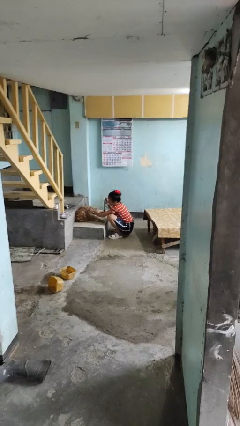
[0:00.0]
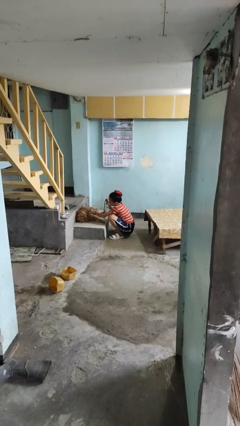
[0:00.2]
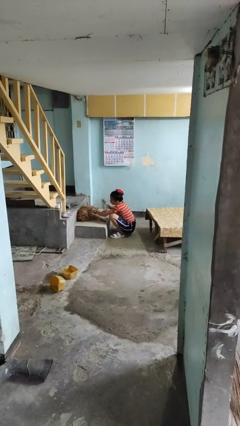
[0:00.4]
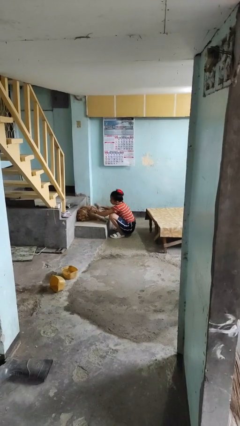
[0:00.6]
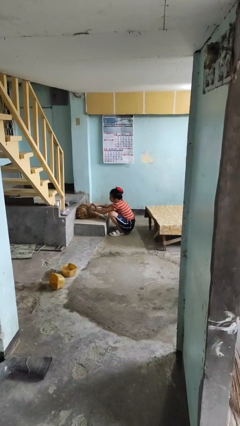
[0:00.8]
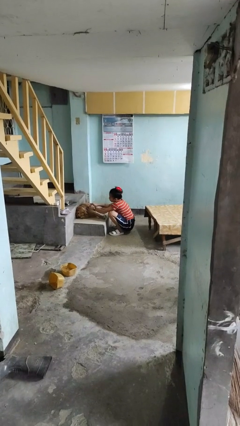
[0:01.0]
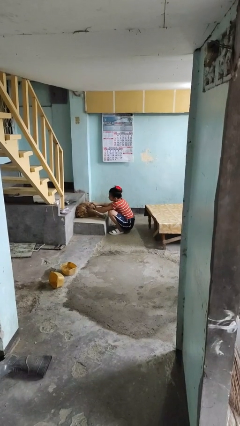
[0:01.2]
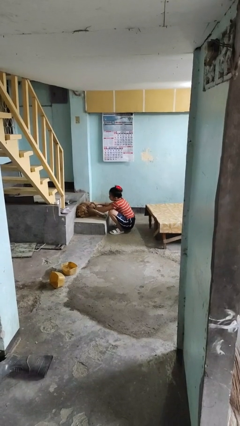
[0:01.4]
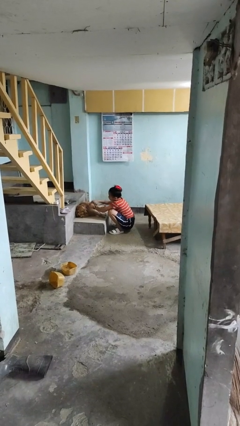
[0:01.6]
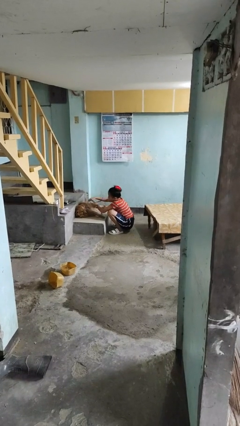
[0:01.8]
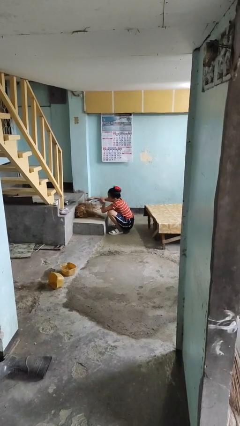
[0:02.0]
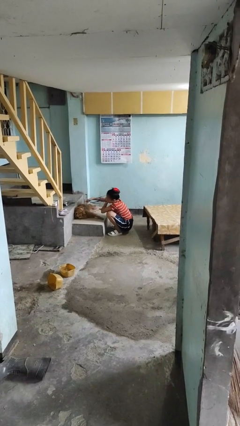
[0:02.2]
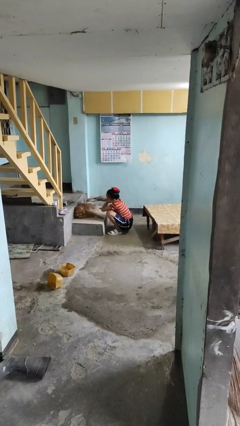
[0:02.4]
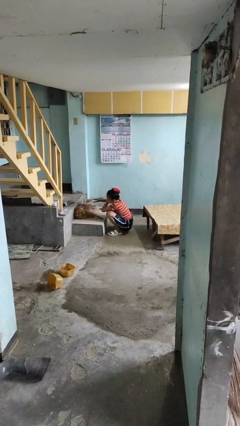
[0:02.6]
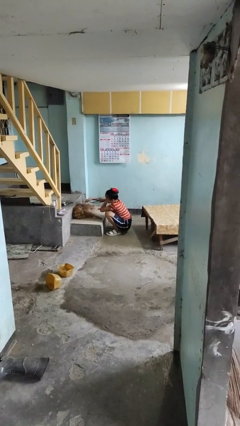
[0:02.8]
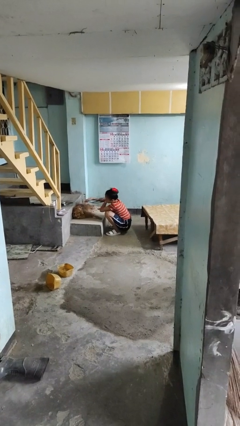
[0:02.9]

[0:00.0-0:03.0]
person attaches leash to dog

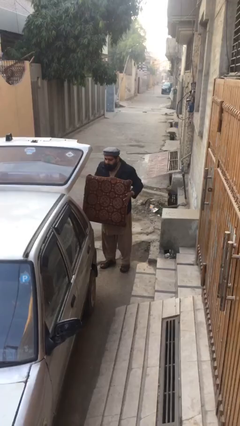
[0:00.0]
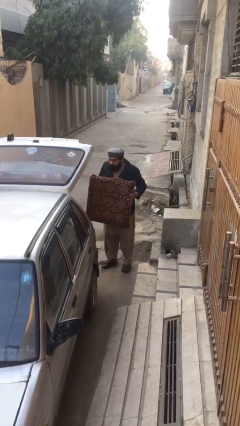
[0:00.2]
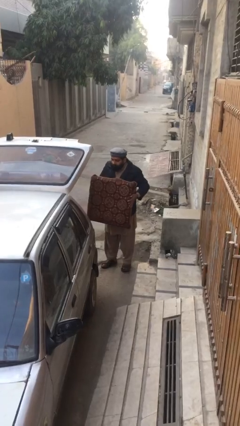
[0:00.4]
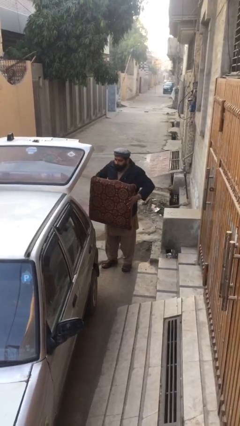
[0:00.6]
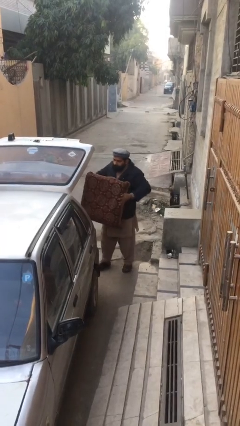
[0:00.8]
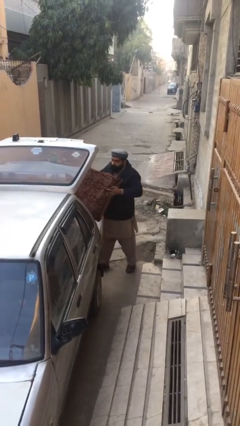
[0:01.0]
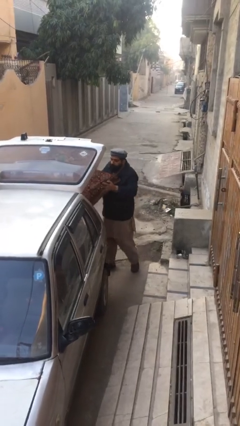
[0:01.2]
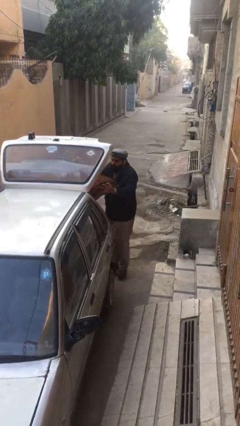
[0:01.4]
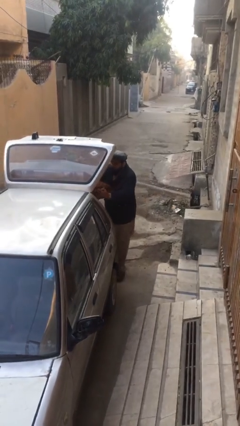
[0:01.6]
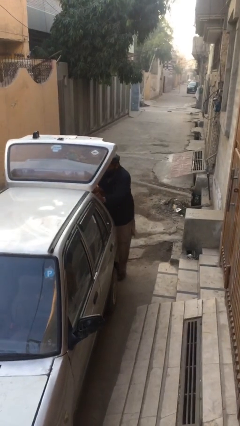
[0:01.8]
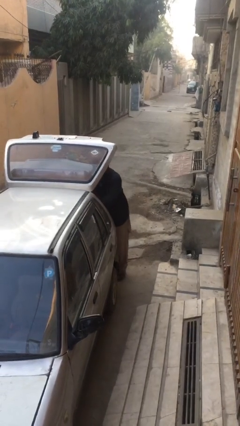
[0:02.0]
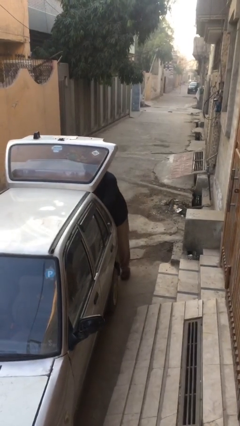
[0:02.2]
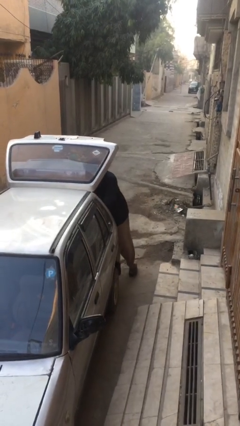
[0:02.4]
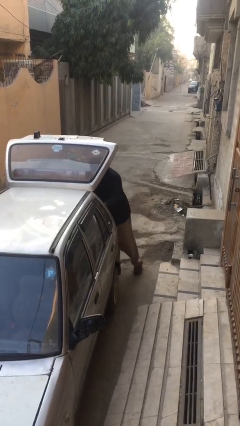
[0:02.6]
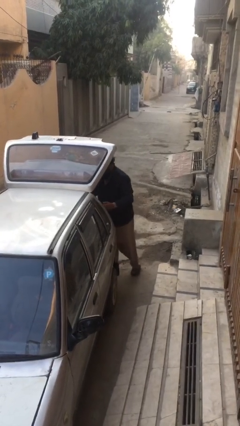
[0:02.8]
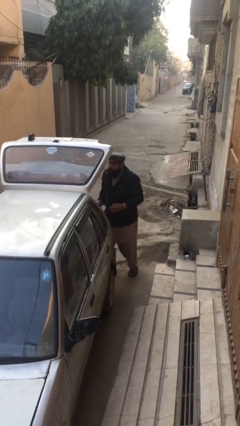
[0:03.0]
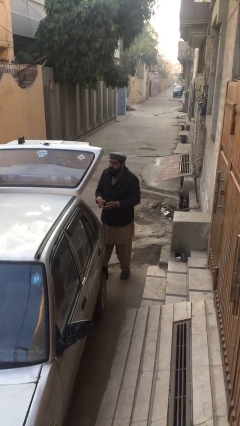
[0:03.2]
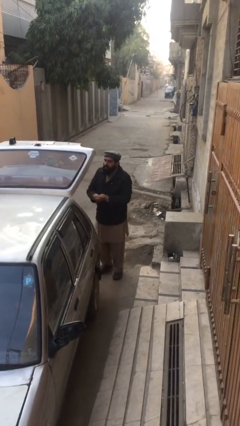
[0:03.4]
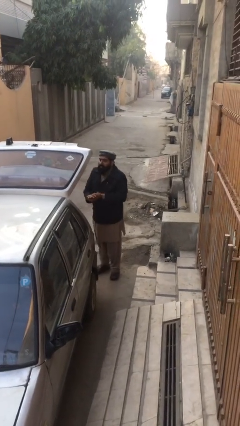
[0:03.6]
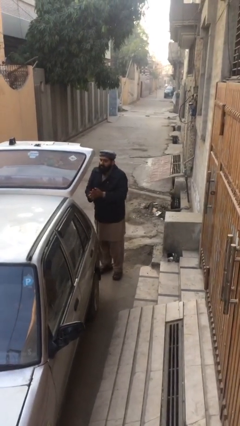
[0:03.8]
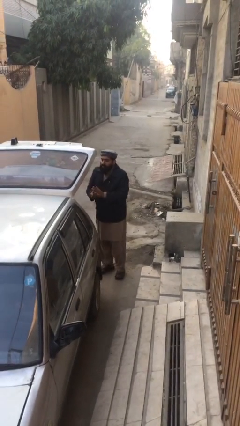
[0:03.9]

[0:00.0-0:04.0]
person loads car

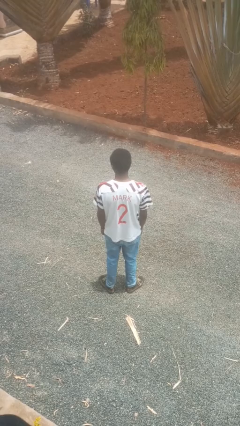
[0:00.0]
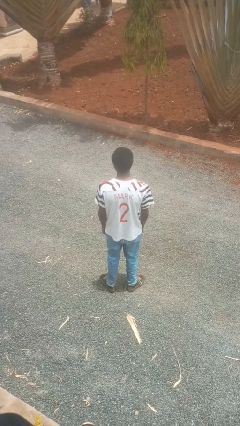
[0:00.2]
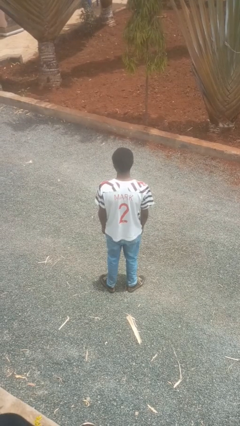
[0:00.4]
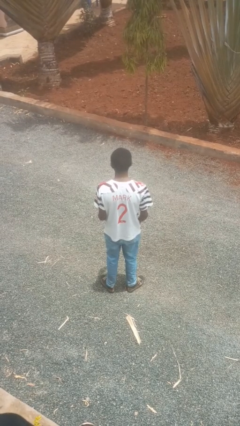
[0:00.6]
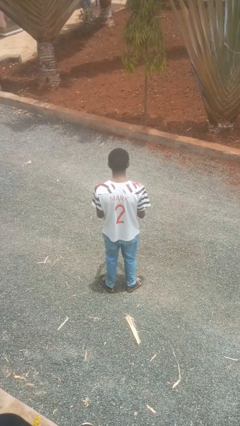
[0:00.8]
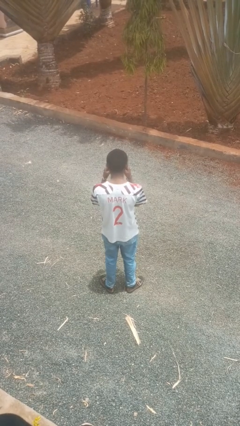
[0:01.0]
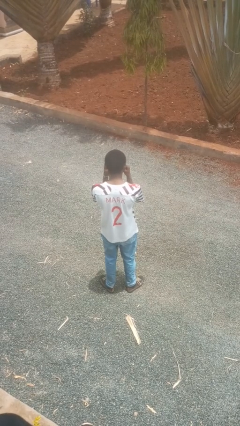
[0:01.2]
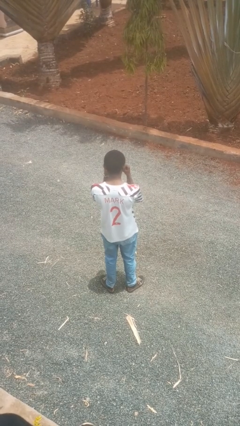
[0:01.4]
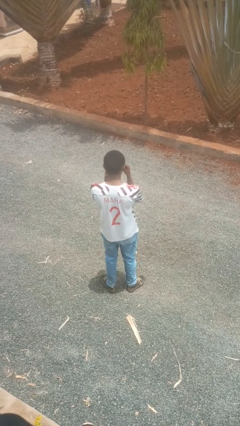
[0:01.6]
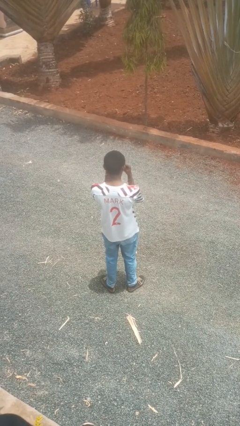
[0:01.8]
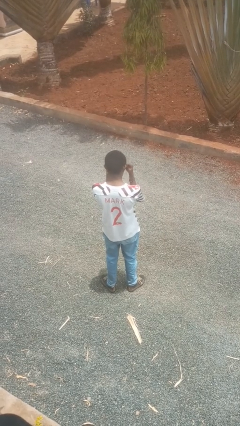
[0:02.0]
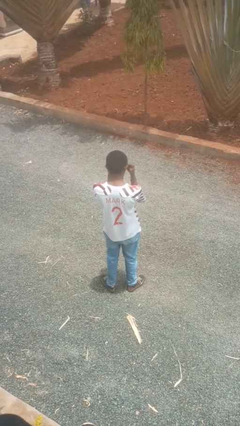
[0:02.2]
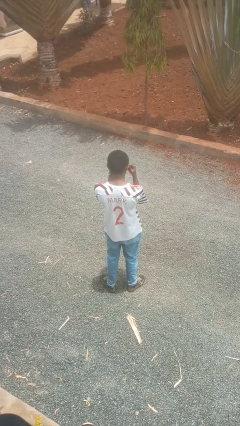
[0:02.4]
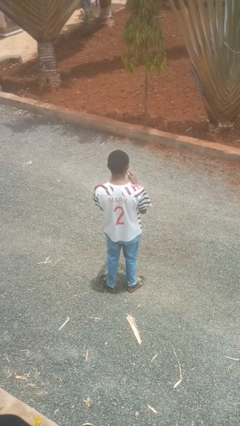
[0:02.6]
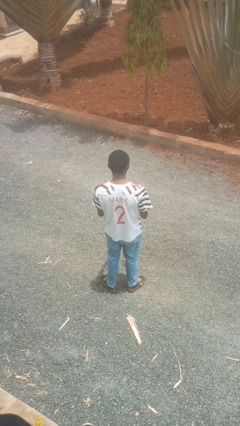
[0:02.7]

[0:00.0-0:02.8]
person gestures watch closely

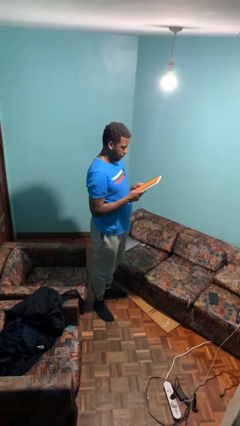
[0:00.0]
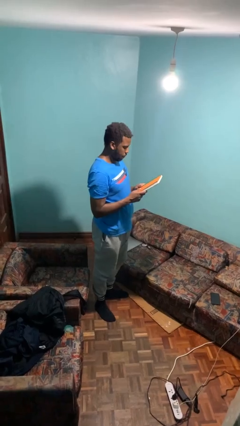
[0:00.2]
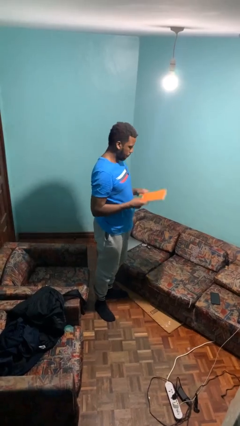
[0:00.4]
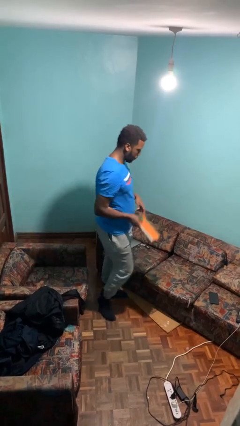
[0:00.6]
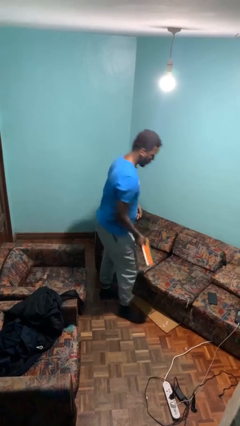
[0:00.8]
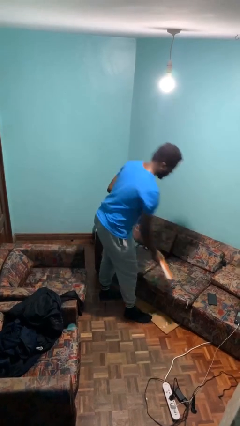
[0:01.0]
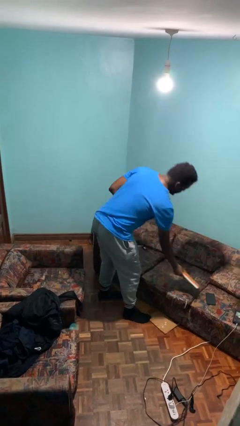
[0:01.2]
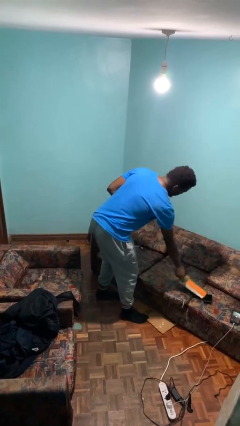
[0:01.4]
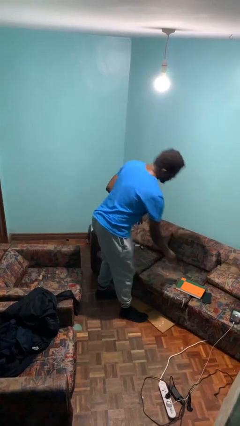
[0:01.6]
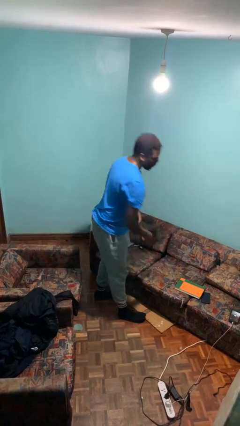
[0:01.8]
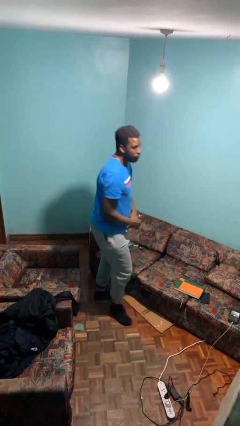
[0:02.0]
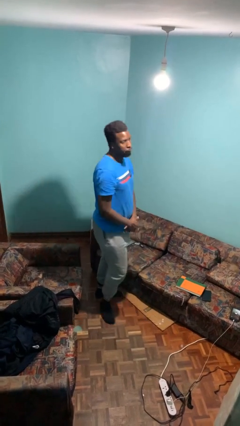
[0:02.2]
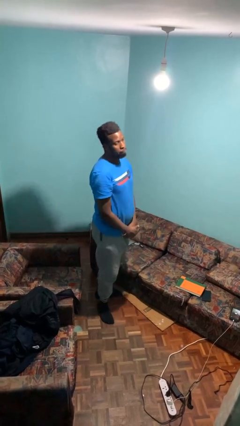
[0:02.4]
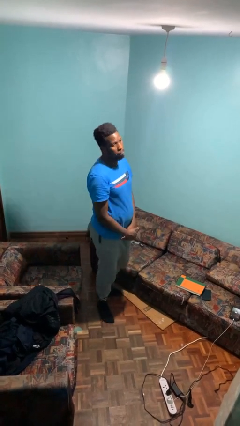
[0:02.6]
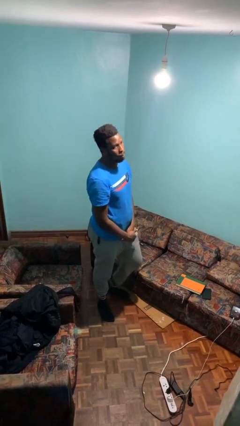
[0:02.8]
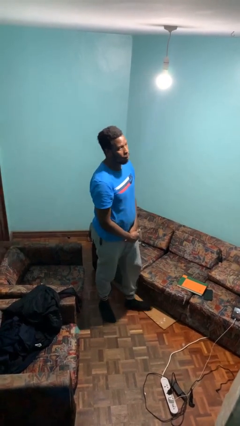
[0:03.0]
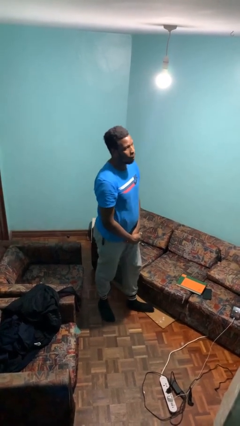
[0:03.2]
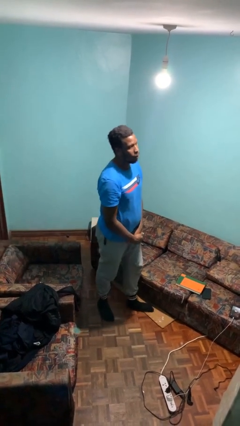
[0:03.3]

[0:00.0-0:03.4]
person puts down object on couch

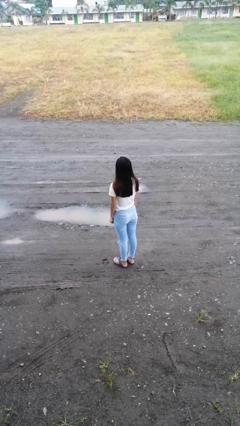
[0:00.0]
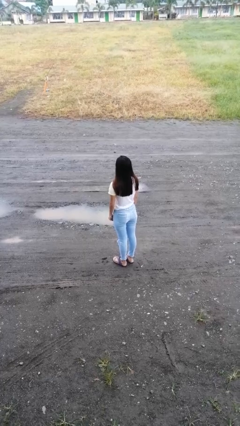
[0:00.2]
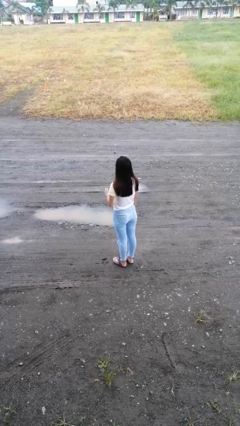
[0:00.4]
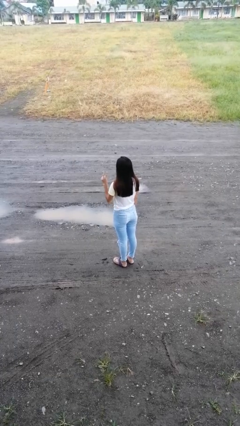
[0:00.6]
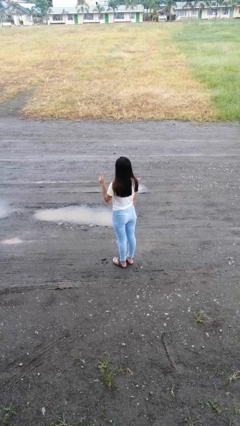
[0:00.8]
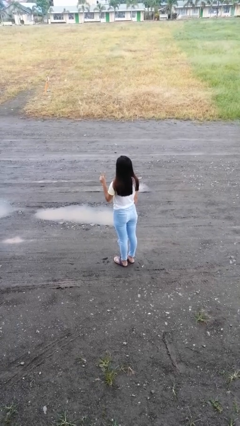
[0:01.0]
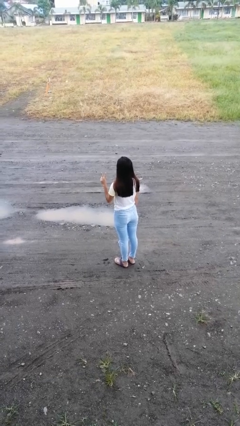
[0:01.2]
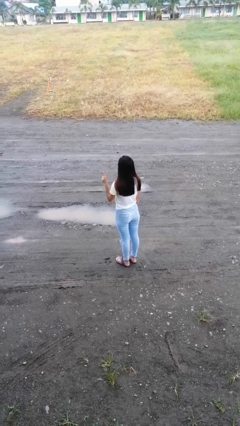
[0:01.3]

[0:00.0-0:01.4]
person gestures peace

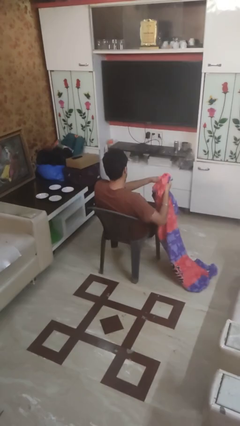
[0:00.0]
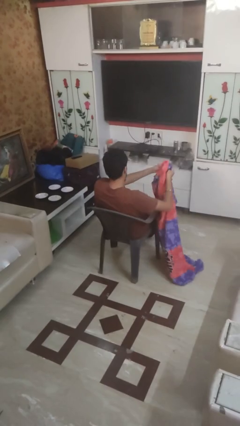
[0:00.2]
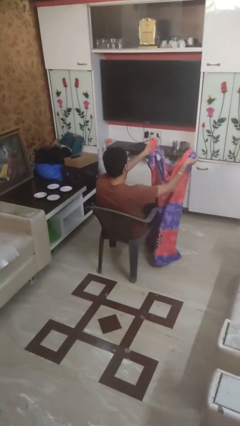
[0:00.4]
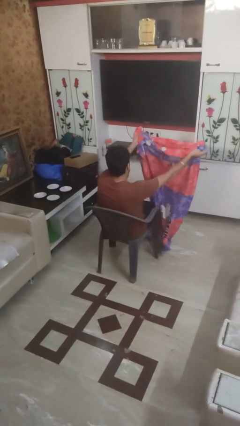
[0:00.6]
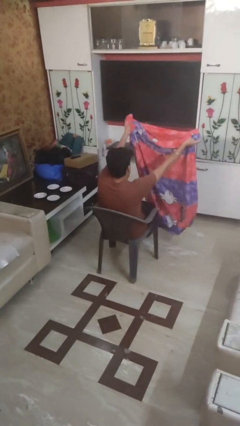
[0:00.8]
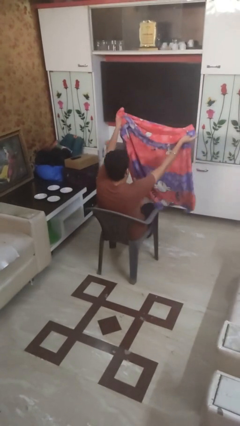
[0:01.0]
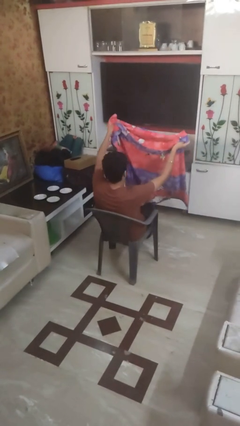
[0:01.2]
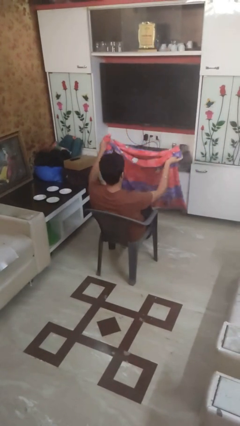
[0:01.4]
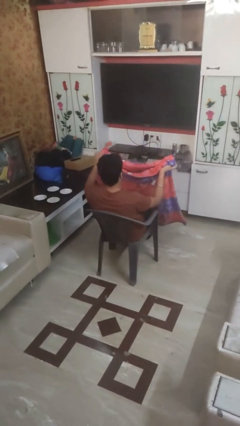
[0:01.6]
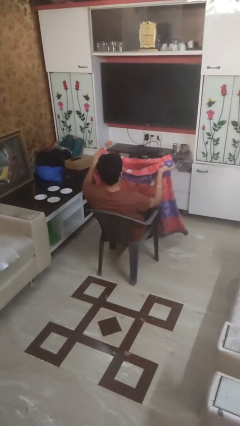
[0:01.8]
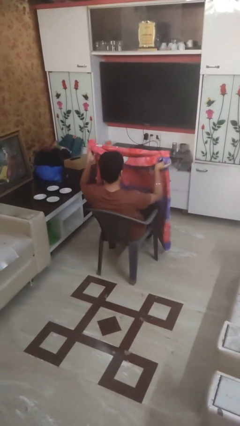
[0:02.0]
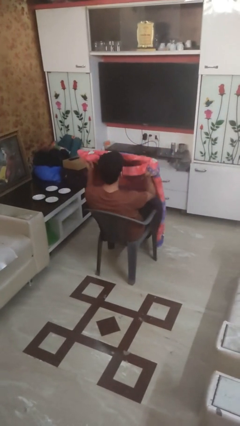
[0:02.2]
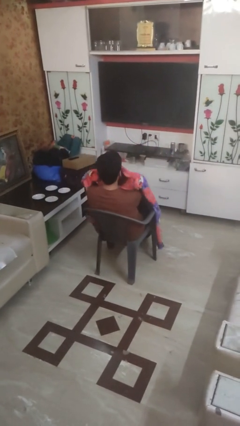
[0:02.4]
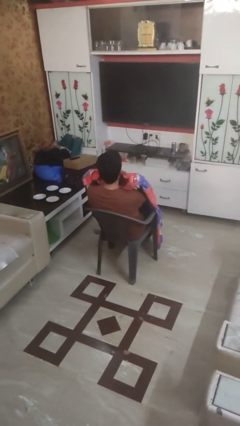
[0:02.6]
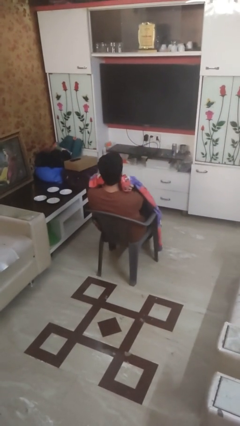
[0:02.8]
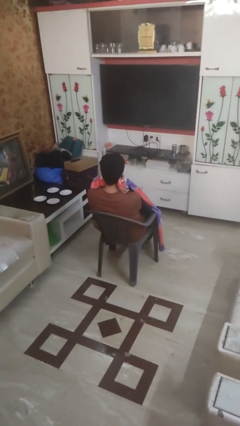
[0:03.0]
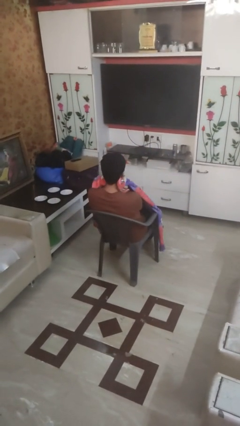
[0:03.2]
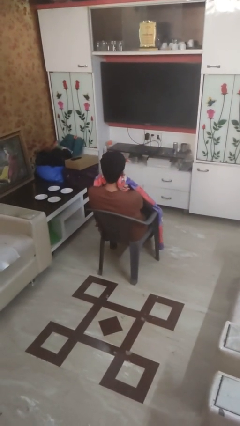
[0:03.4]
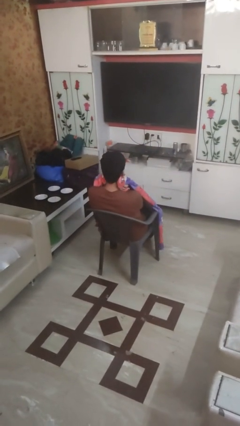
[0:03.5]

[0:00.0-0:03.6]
person covers with blanket
